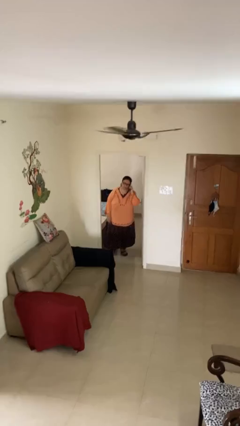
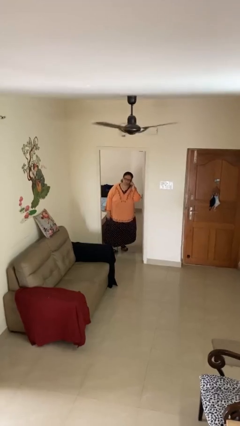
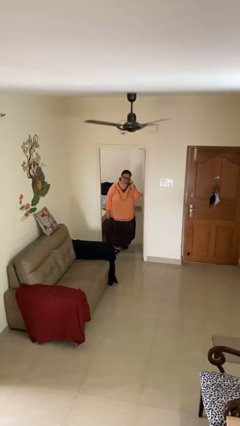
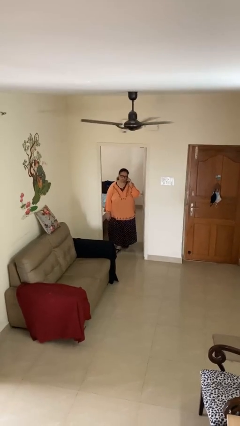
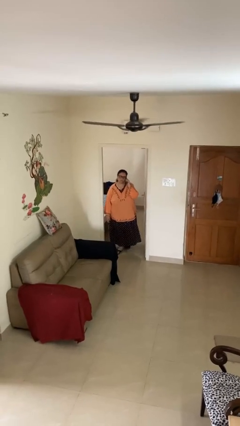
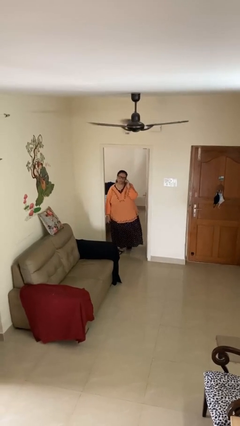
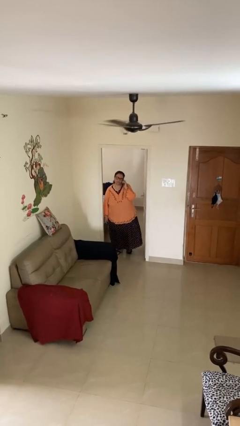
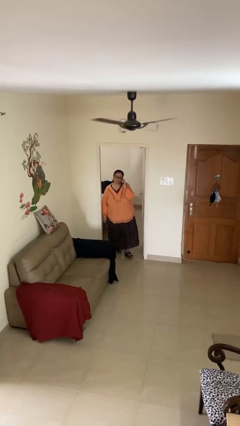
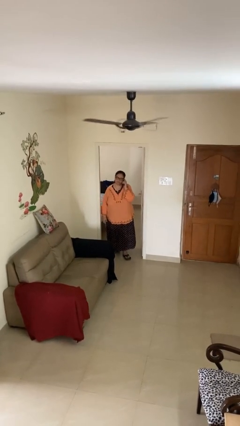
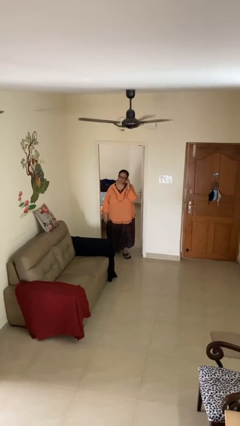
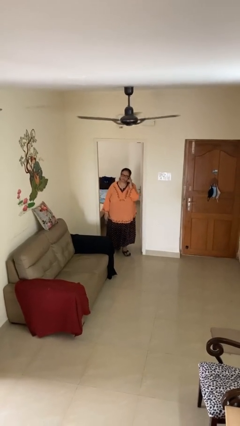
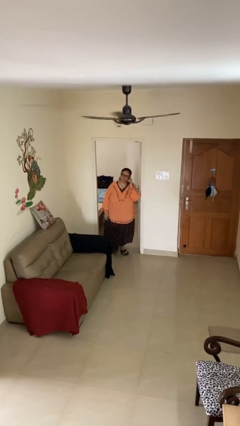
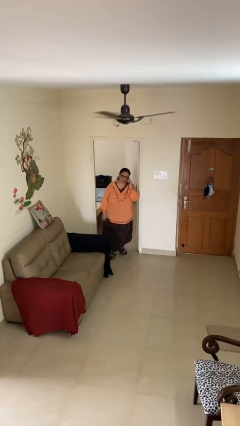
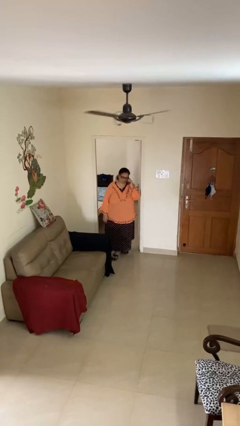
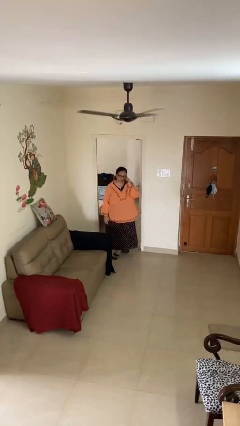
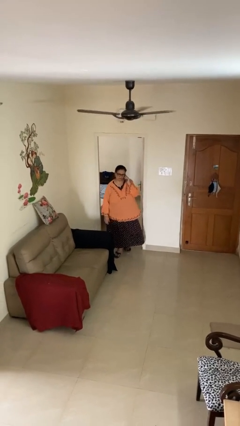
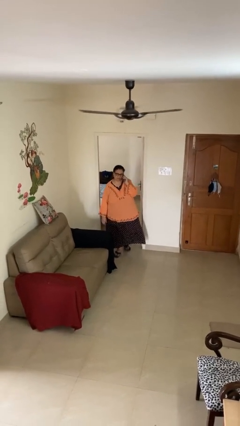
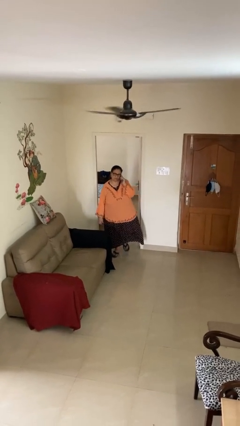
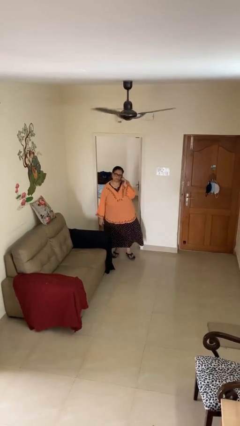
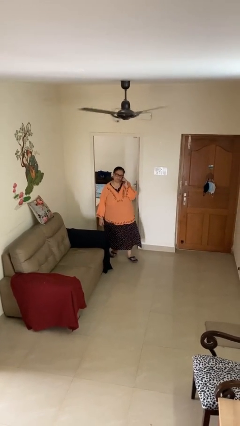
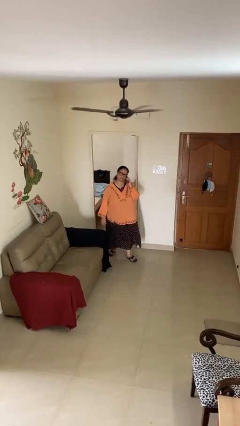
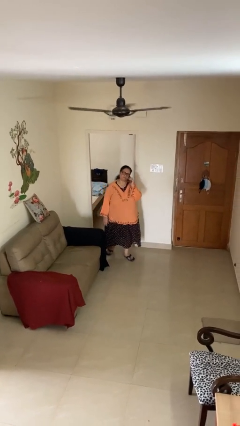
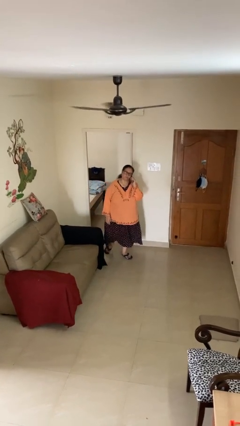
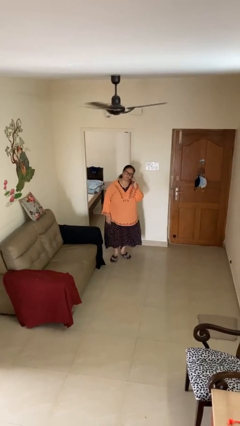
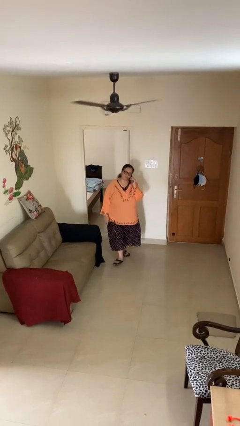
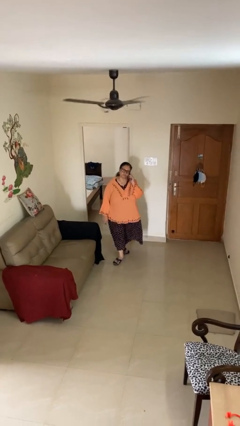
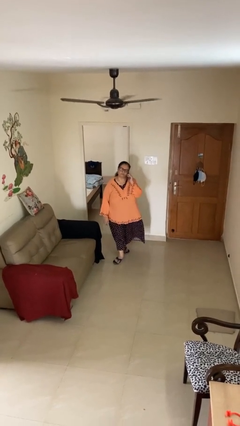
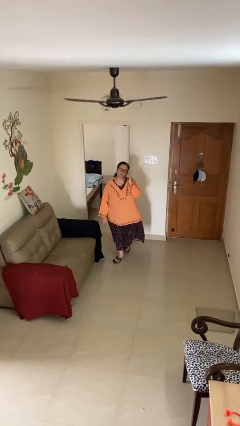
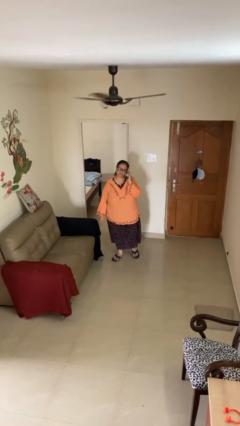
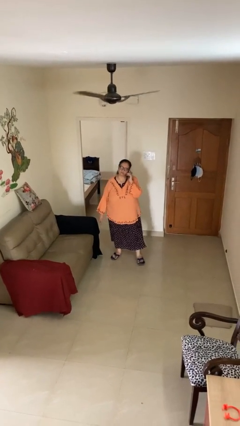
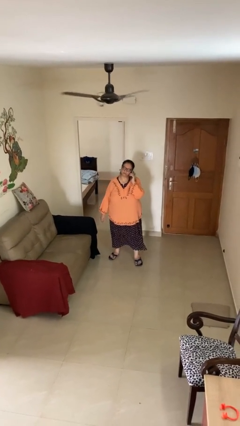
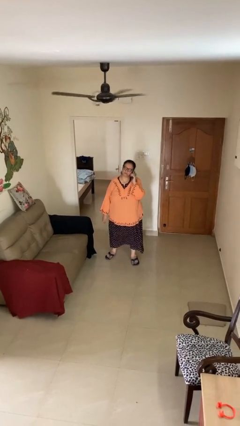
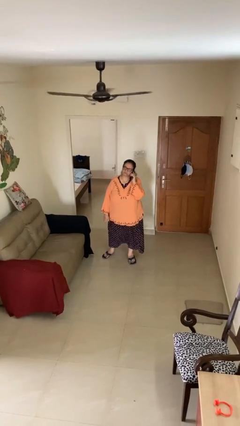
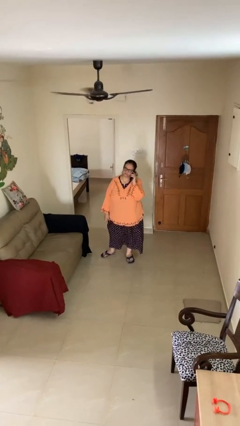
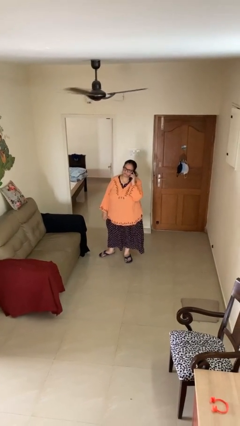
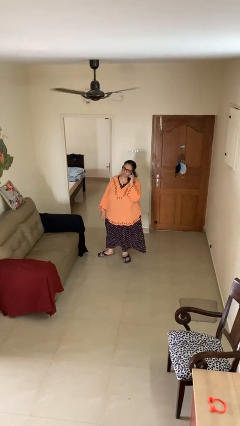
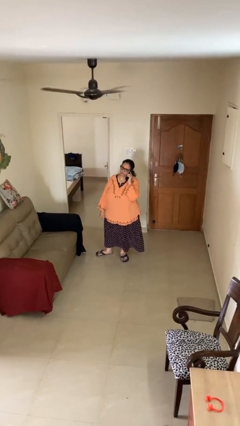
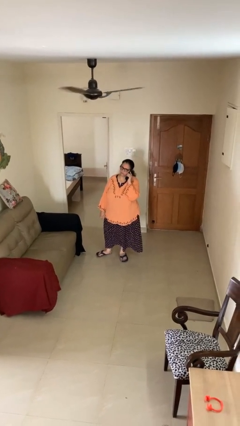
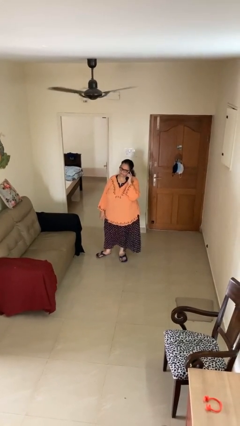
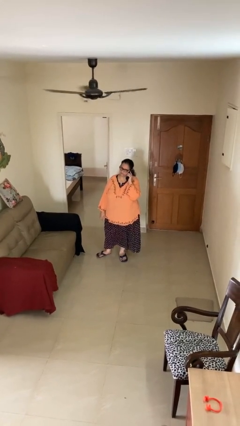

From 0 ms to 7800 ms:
person enters scene through structure

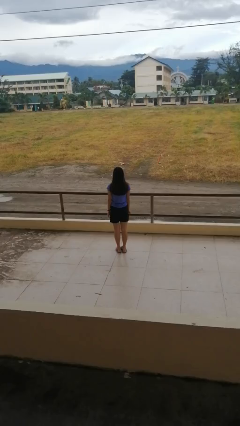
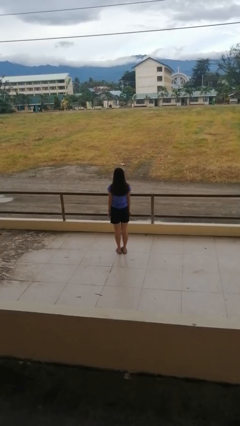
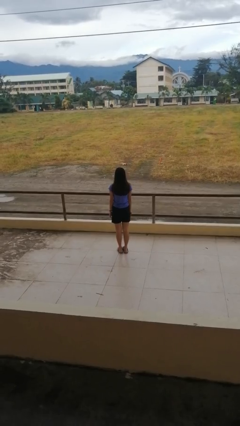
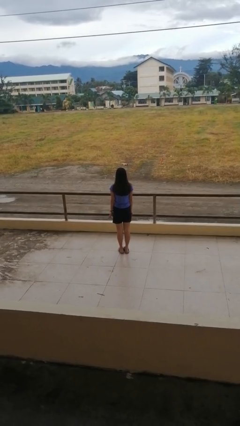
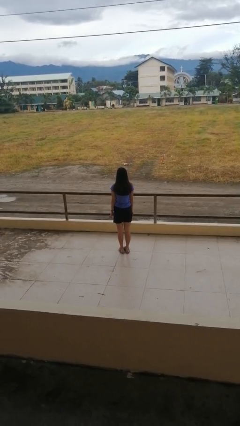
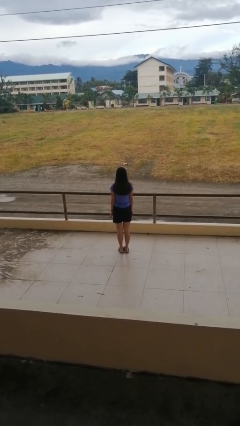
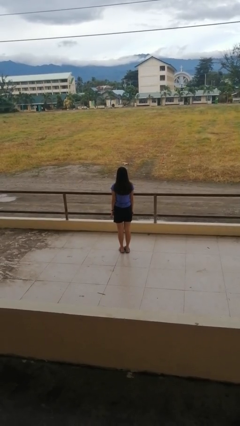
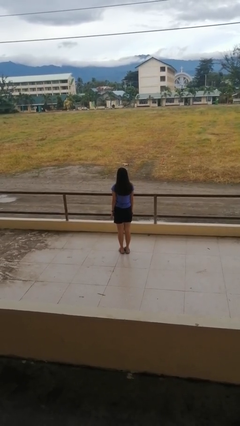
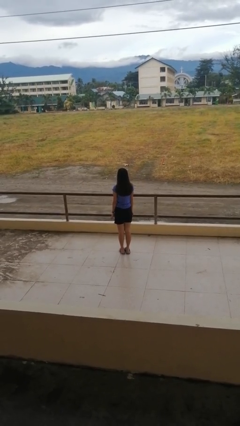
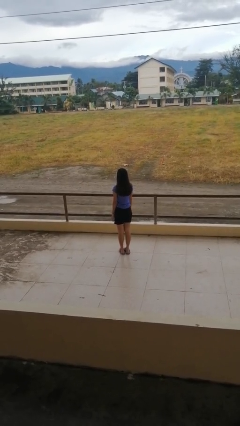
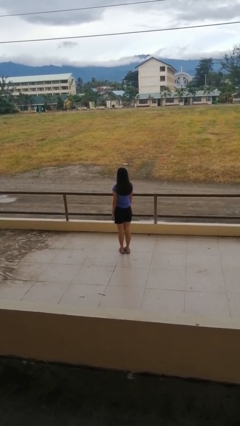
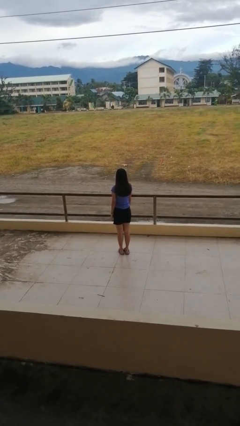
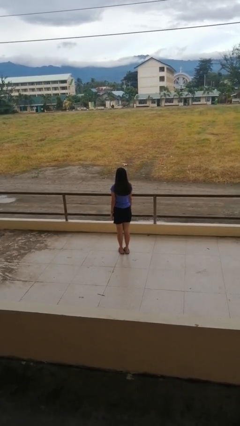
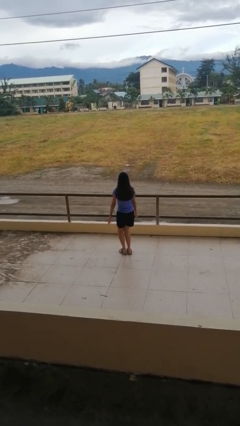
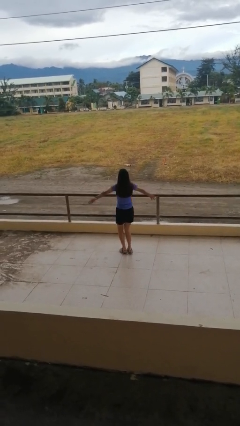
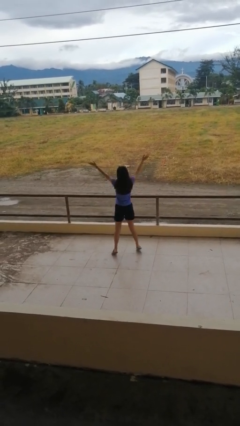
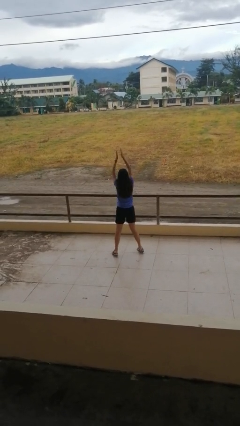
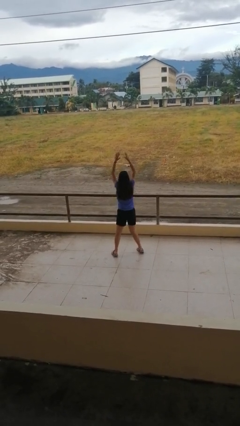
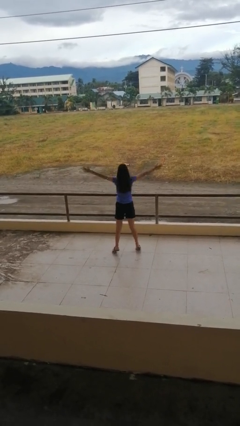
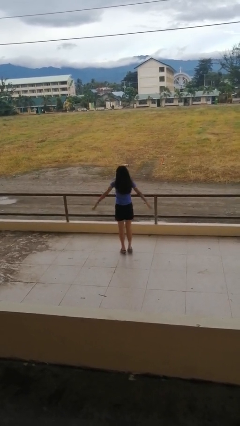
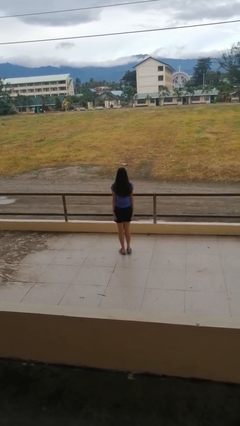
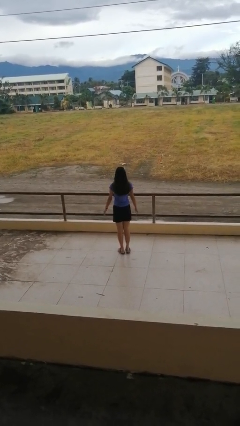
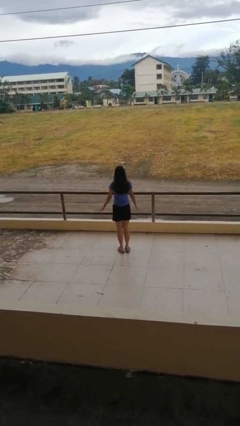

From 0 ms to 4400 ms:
person exercises with jumping jacks

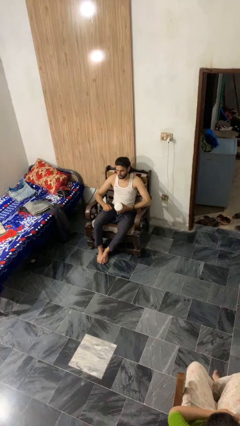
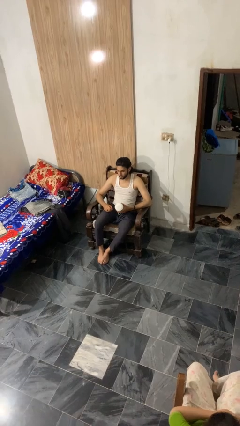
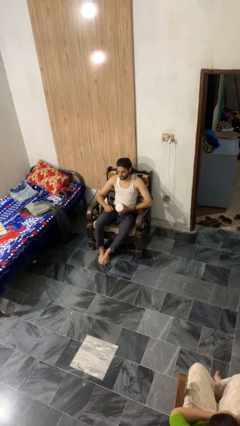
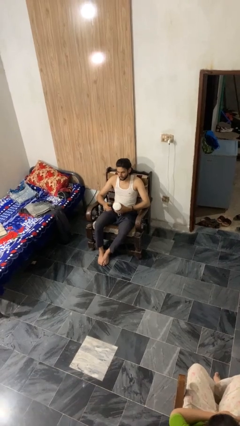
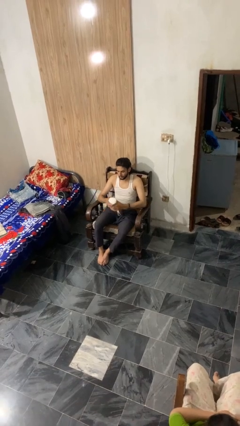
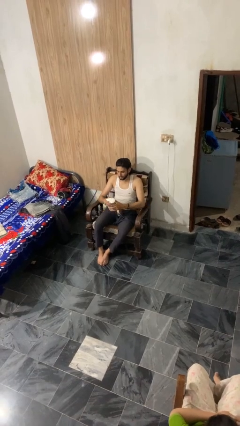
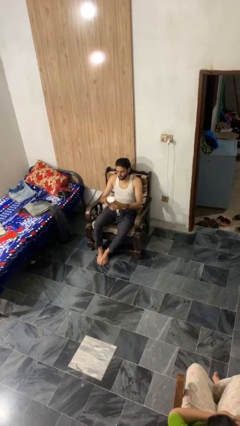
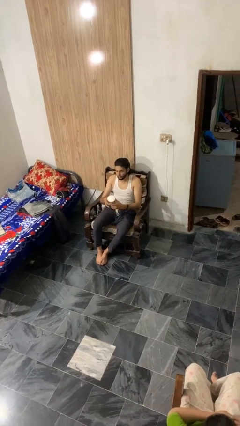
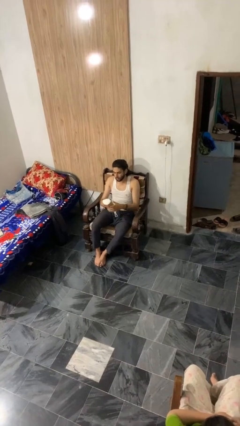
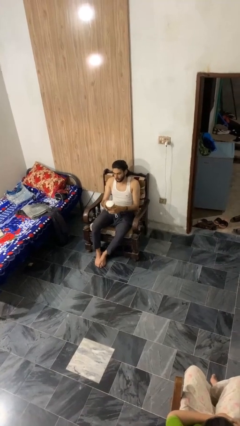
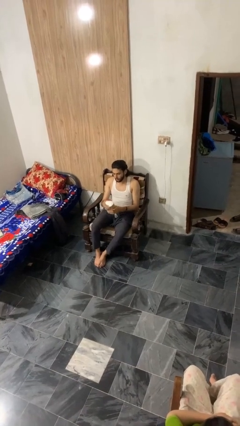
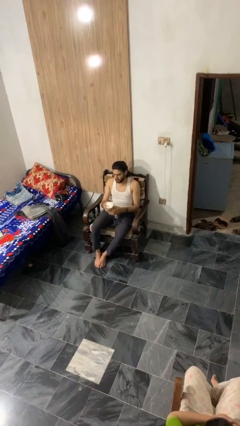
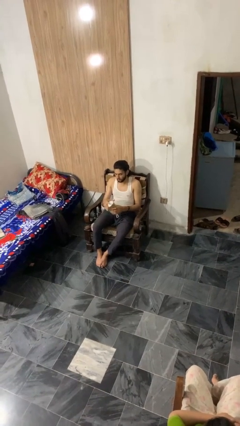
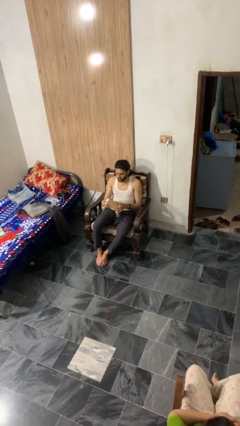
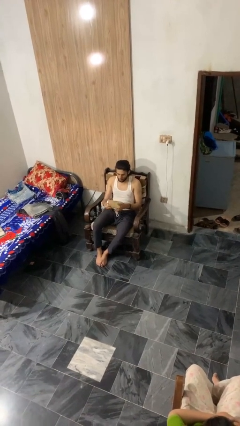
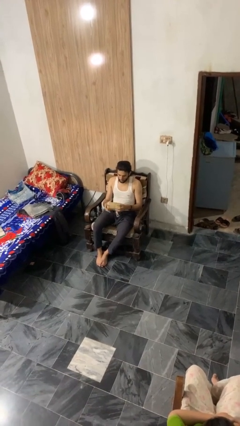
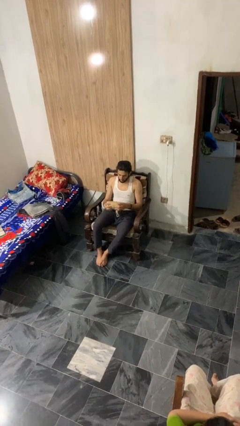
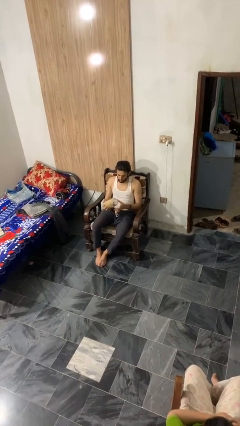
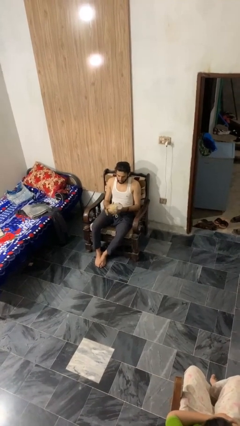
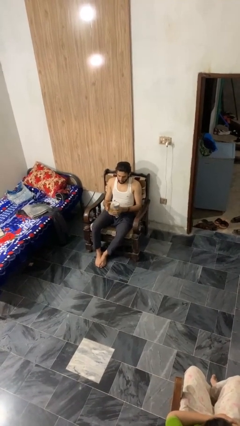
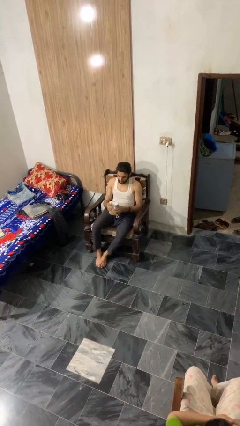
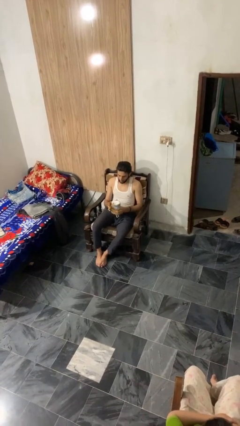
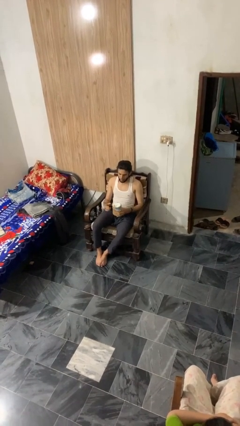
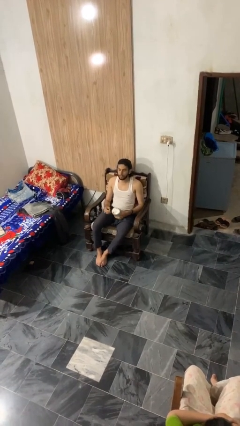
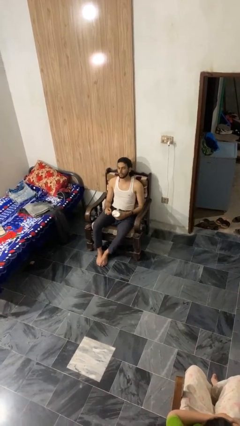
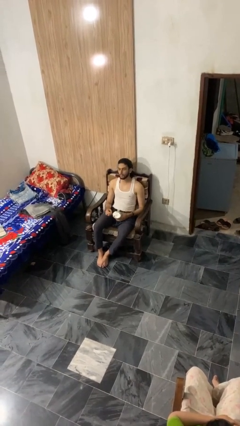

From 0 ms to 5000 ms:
person squeezes object

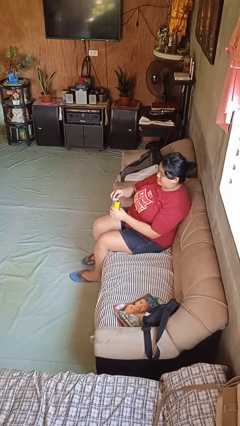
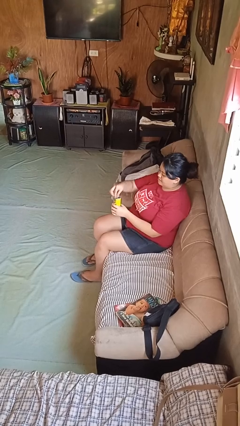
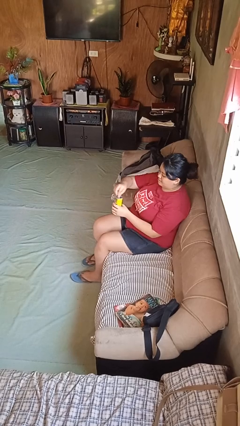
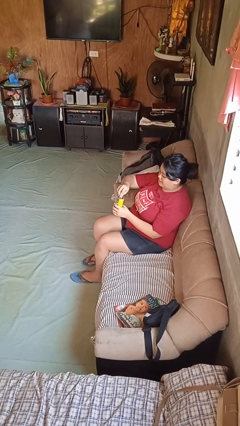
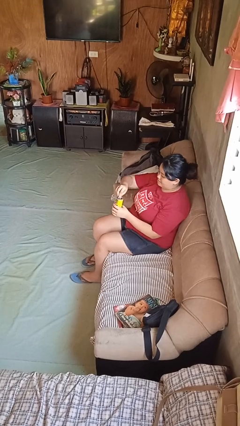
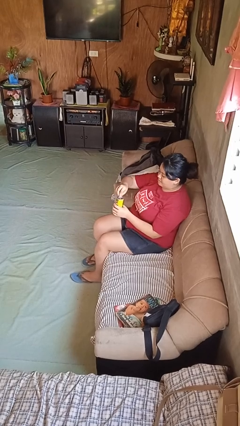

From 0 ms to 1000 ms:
person opens beverage can
